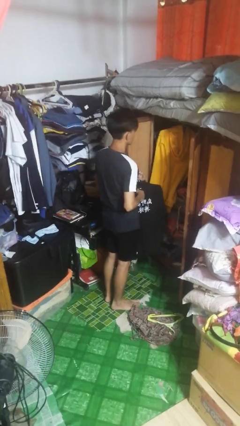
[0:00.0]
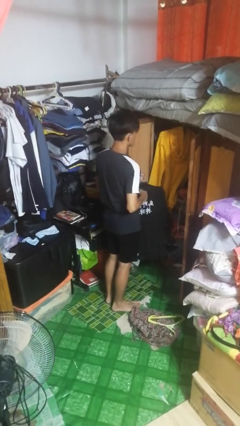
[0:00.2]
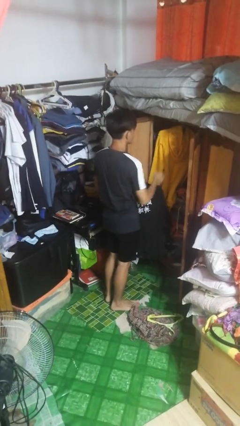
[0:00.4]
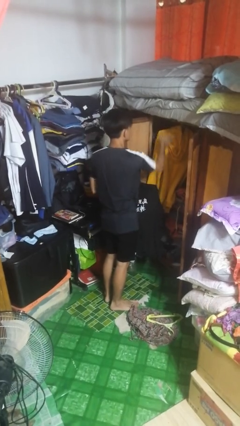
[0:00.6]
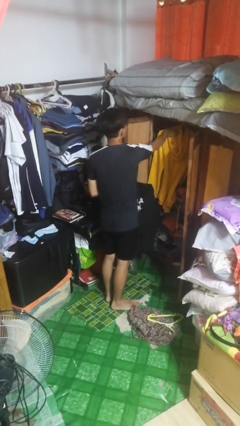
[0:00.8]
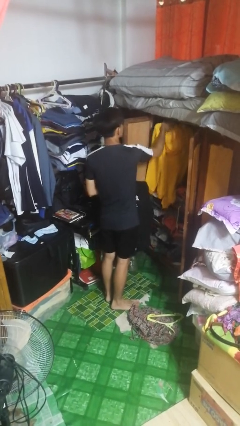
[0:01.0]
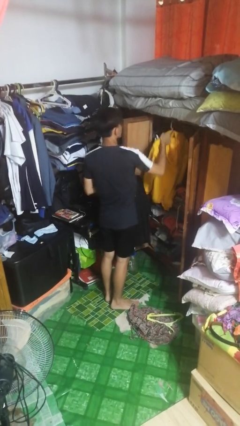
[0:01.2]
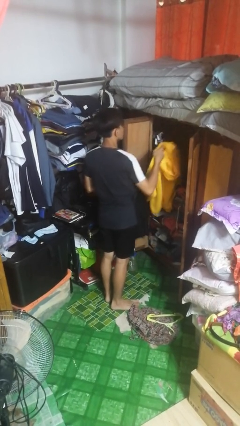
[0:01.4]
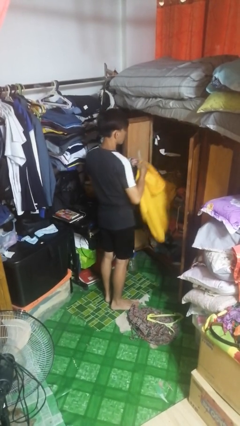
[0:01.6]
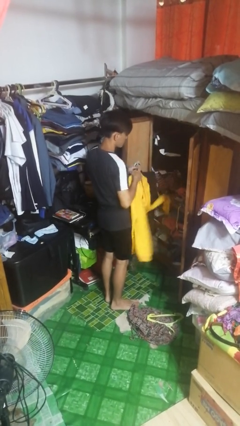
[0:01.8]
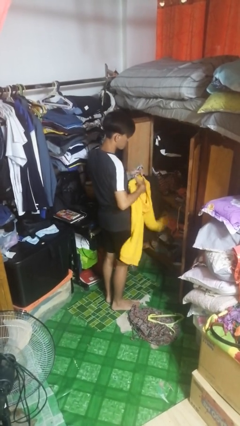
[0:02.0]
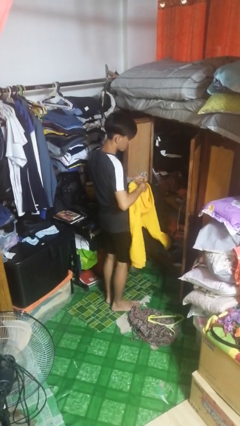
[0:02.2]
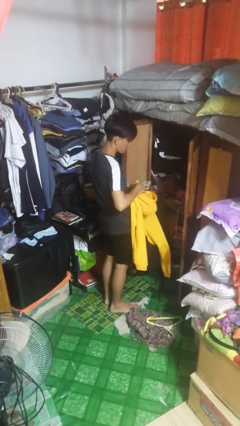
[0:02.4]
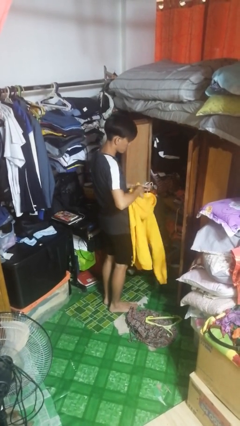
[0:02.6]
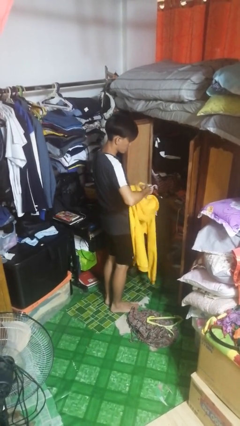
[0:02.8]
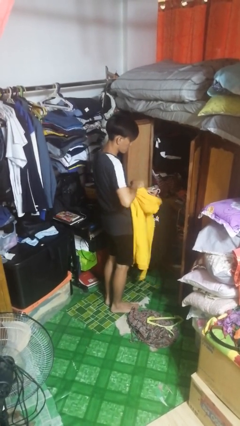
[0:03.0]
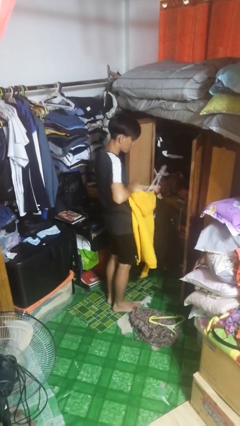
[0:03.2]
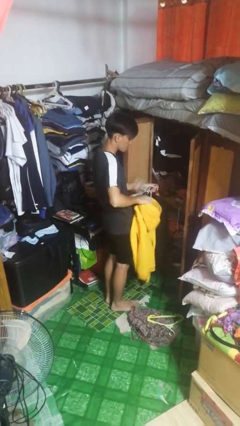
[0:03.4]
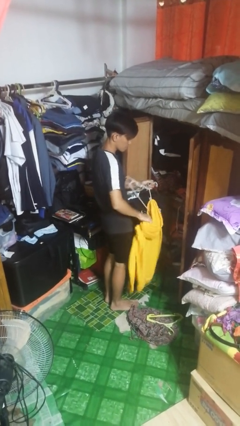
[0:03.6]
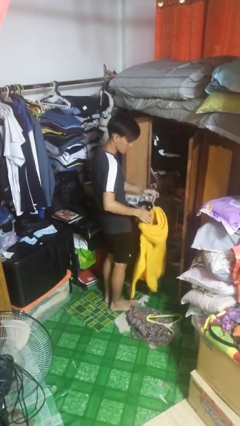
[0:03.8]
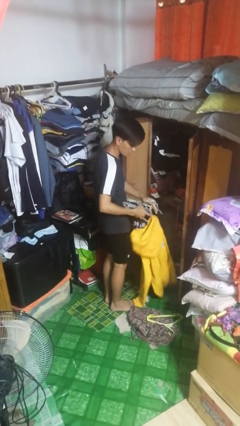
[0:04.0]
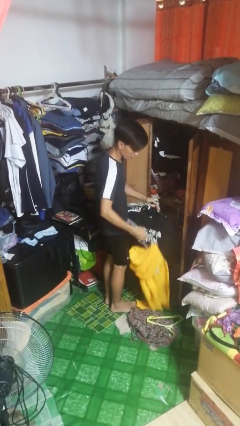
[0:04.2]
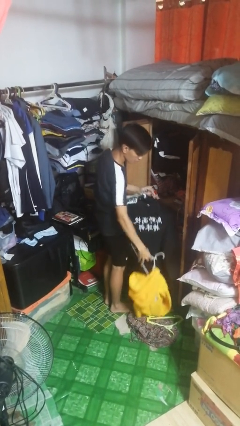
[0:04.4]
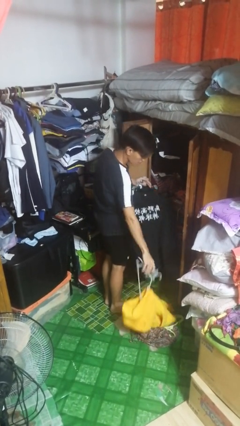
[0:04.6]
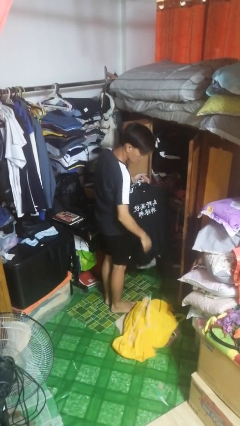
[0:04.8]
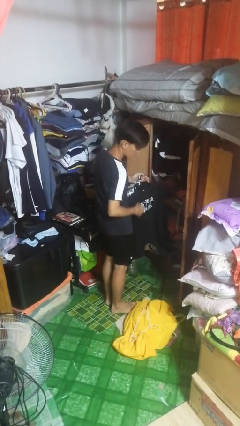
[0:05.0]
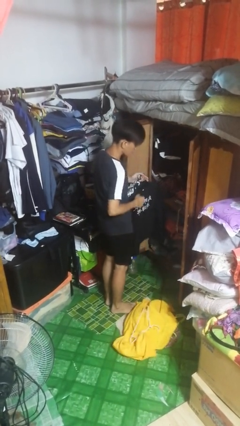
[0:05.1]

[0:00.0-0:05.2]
person takes clothes from closet

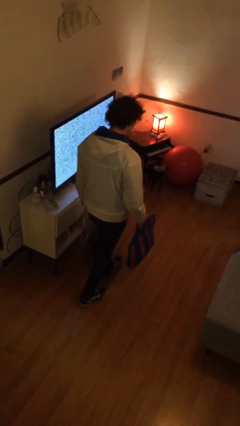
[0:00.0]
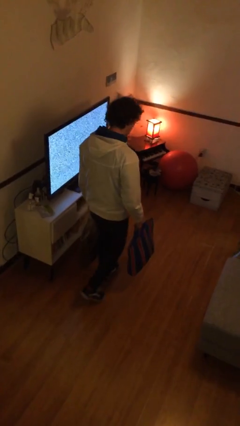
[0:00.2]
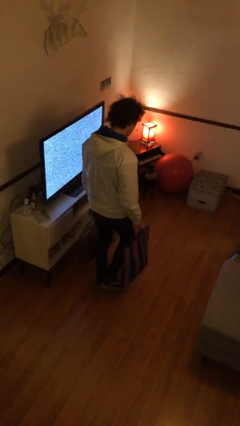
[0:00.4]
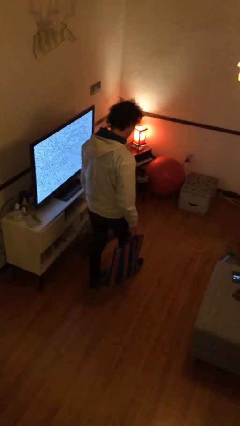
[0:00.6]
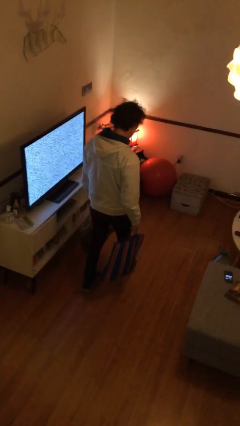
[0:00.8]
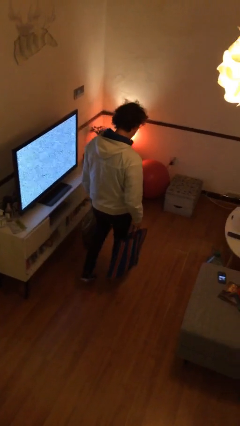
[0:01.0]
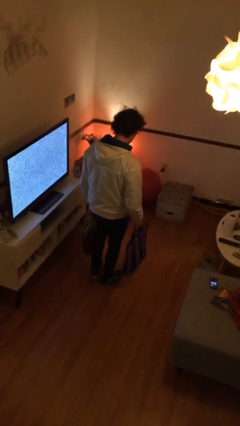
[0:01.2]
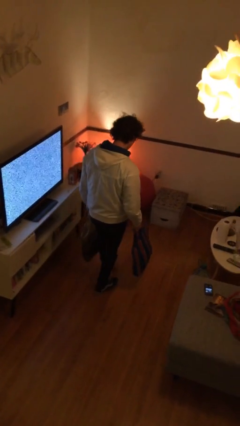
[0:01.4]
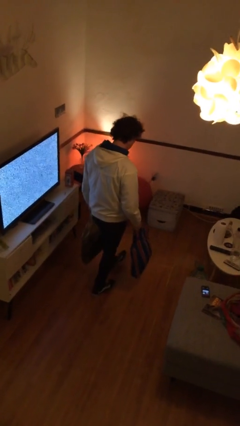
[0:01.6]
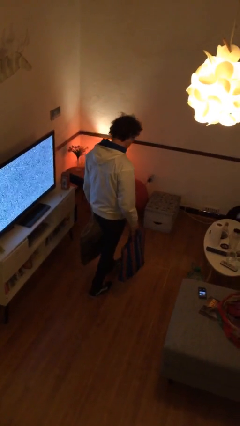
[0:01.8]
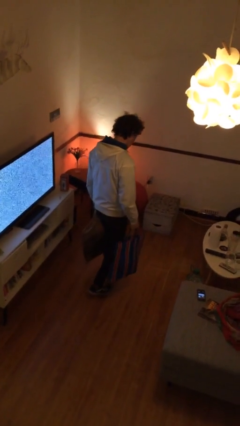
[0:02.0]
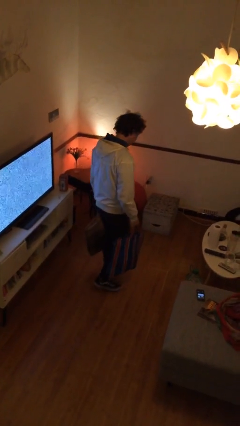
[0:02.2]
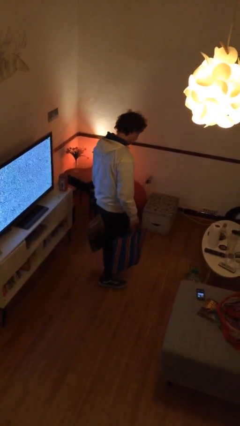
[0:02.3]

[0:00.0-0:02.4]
person carries groceries

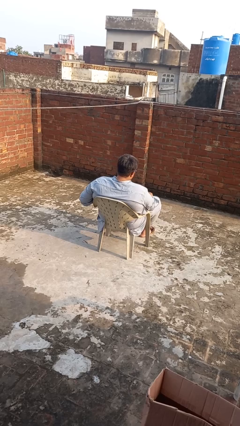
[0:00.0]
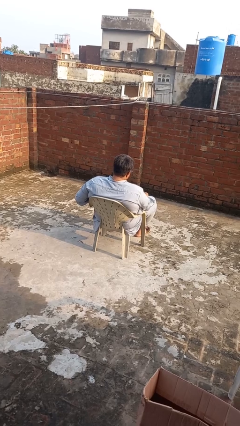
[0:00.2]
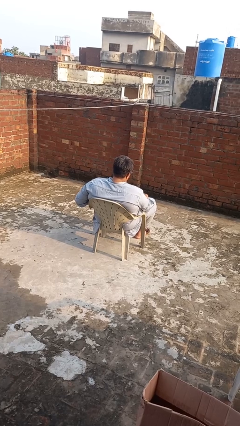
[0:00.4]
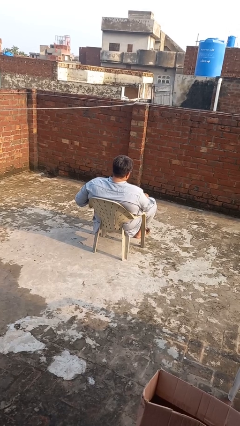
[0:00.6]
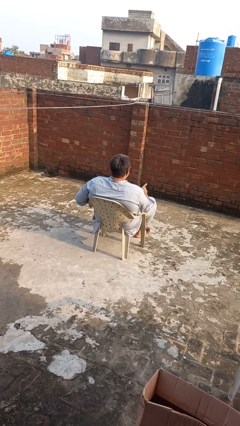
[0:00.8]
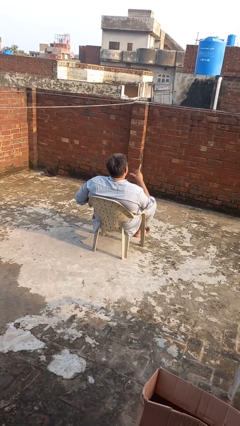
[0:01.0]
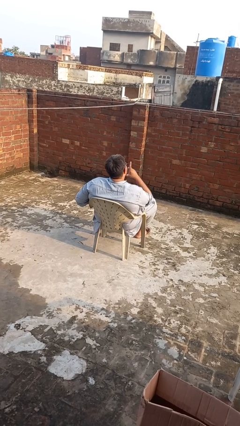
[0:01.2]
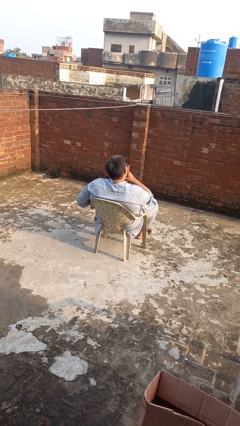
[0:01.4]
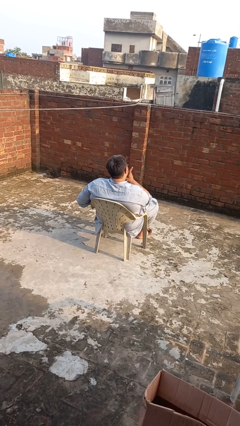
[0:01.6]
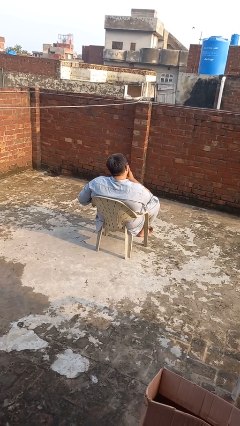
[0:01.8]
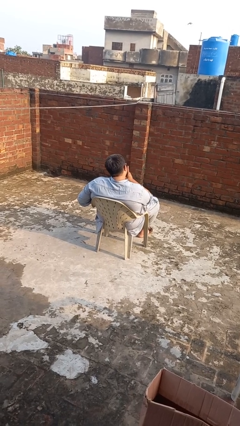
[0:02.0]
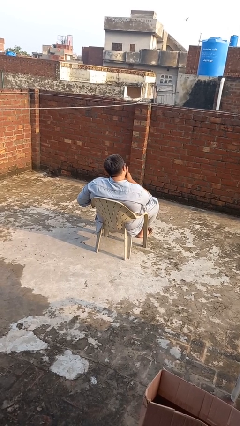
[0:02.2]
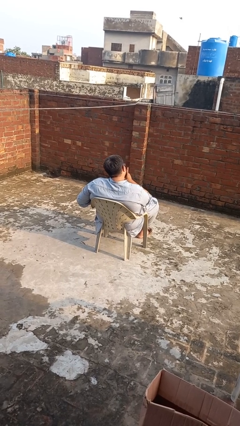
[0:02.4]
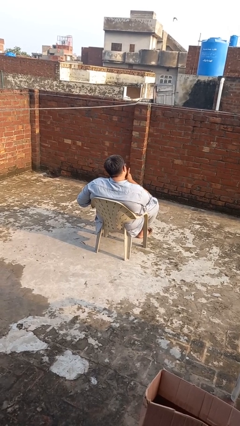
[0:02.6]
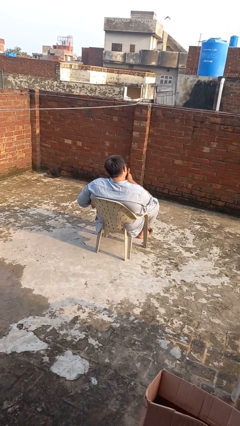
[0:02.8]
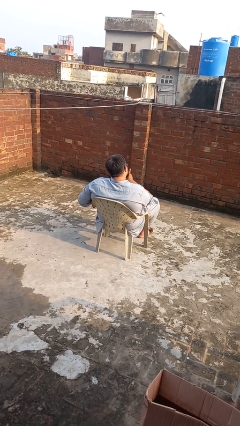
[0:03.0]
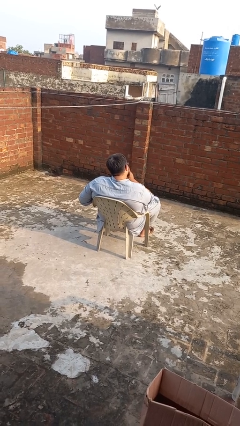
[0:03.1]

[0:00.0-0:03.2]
person strokes chin

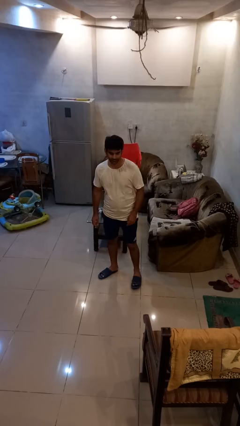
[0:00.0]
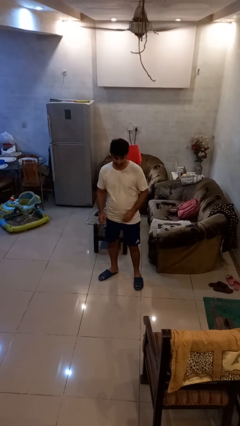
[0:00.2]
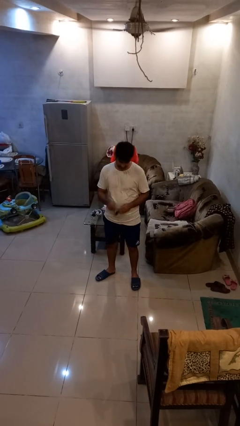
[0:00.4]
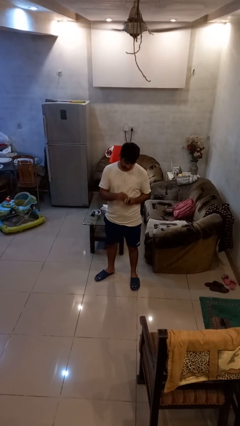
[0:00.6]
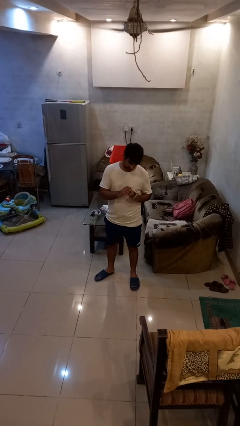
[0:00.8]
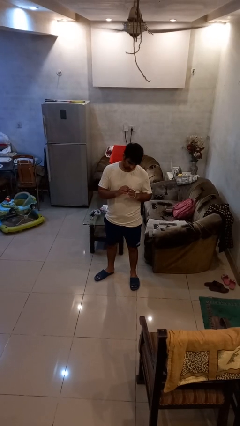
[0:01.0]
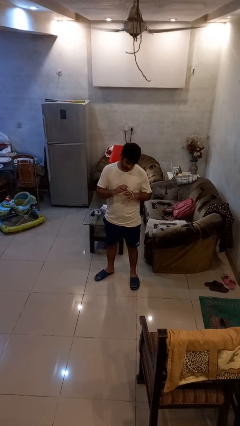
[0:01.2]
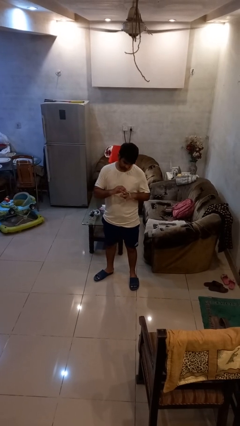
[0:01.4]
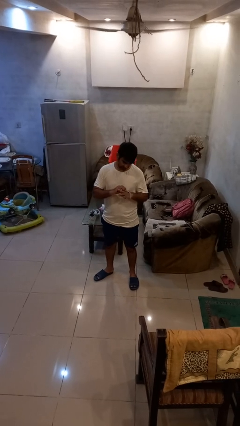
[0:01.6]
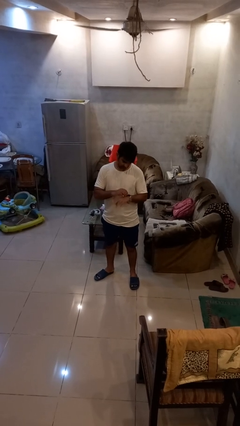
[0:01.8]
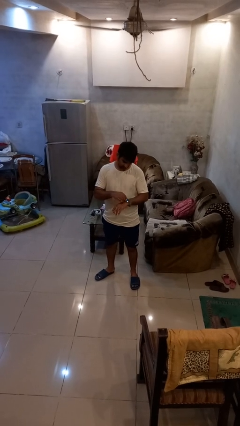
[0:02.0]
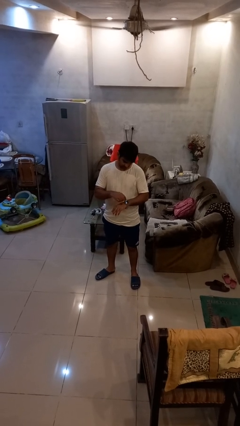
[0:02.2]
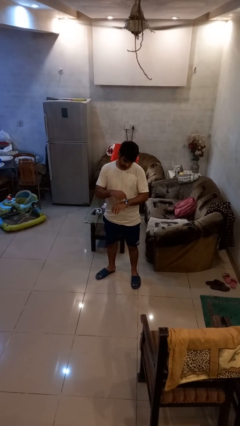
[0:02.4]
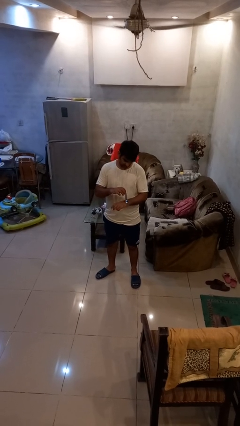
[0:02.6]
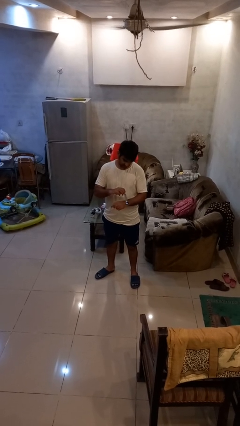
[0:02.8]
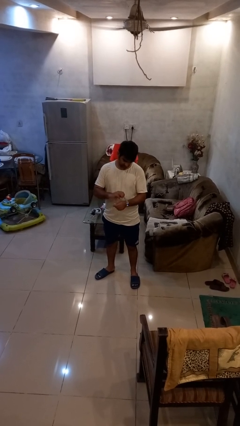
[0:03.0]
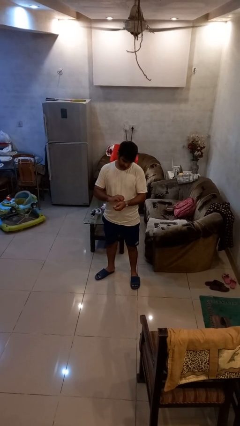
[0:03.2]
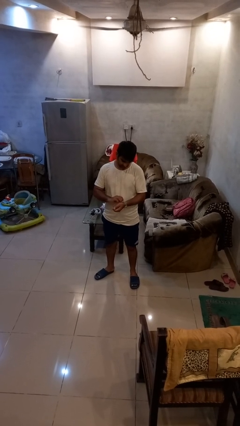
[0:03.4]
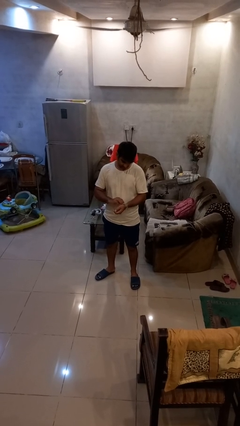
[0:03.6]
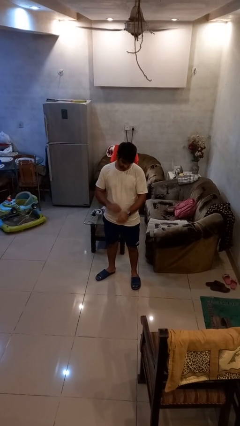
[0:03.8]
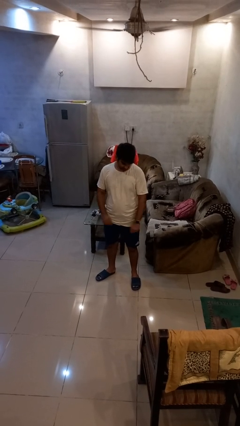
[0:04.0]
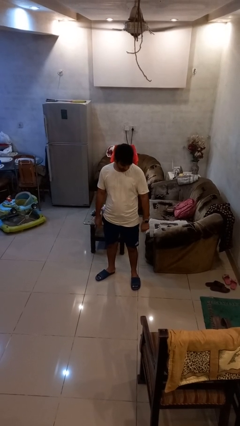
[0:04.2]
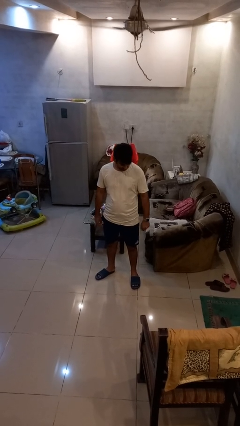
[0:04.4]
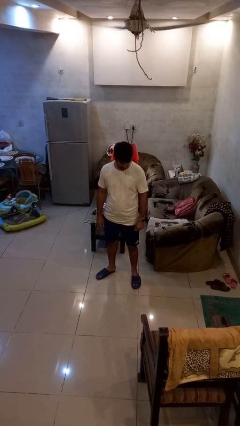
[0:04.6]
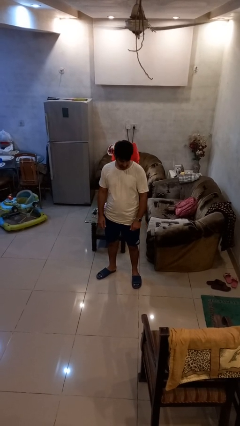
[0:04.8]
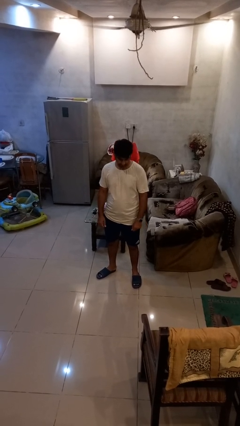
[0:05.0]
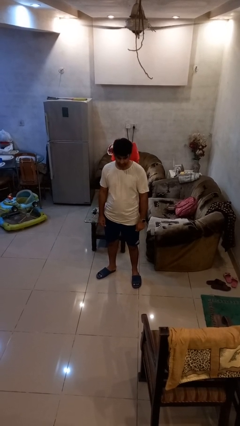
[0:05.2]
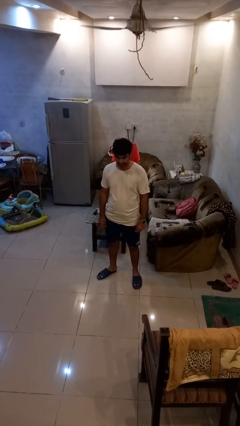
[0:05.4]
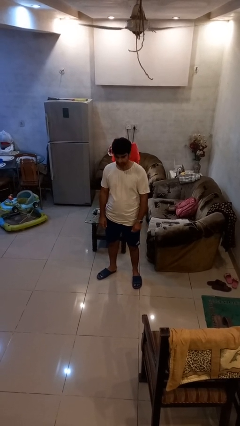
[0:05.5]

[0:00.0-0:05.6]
person puts on wristwatch

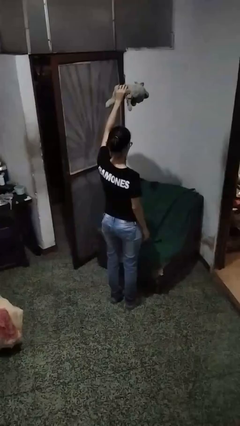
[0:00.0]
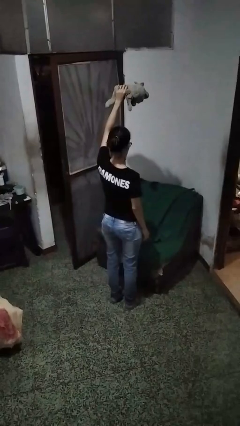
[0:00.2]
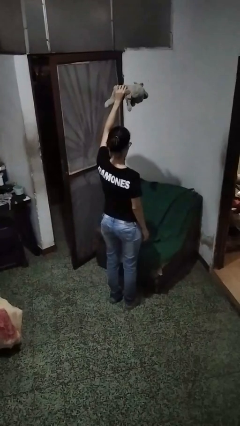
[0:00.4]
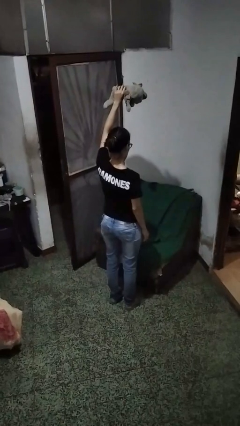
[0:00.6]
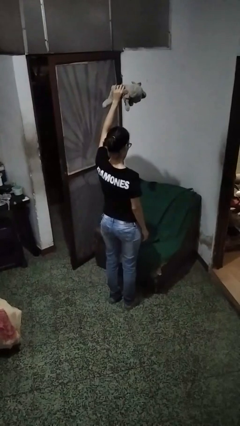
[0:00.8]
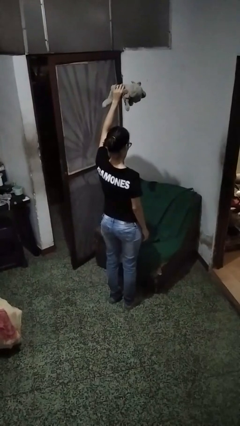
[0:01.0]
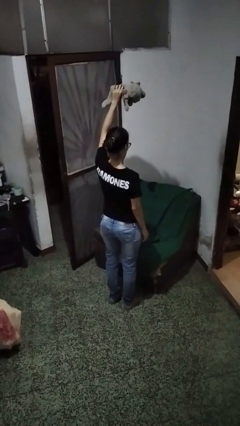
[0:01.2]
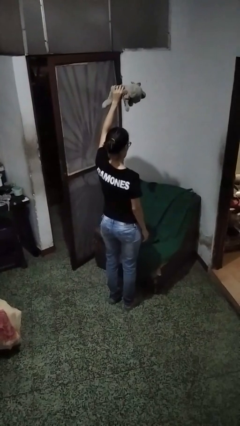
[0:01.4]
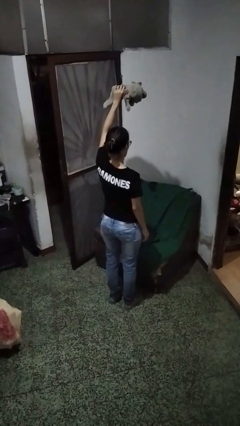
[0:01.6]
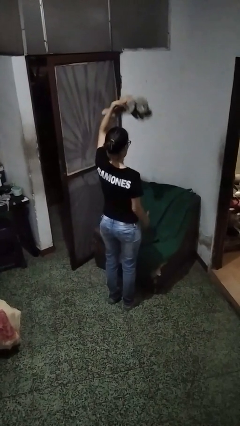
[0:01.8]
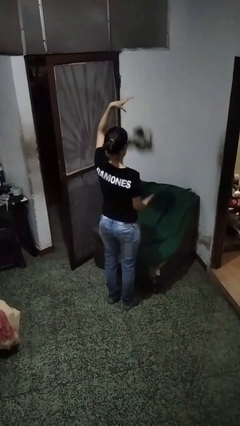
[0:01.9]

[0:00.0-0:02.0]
person drops object
